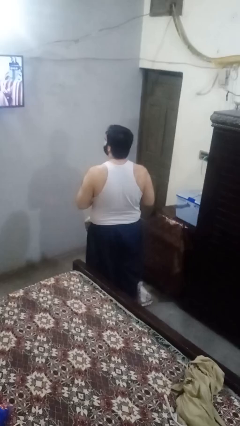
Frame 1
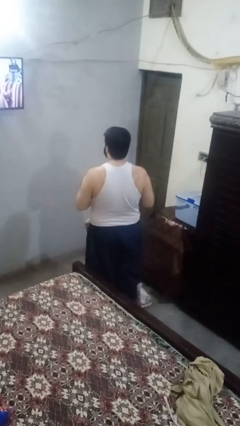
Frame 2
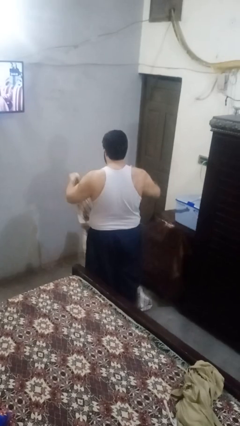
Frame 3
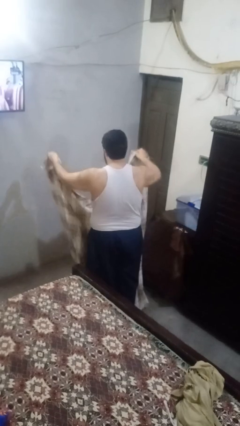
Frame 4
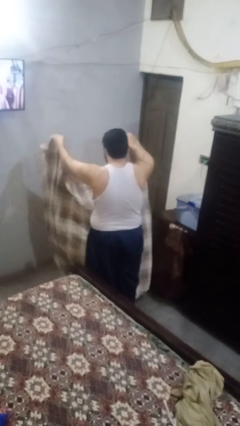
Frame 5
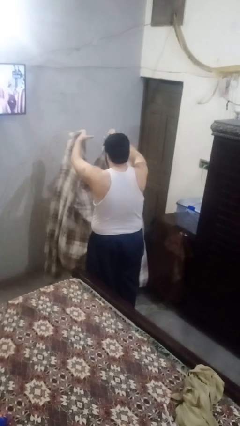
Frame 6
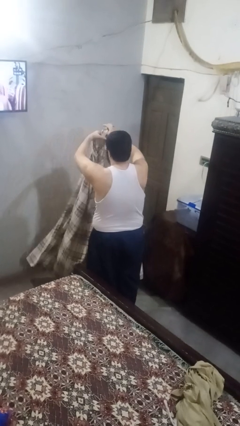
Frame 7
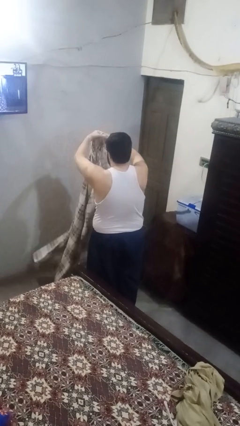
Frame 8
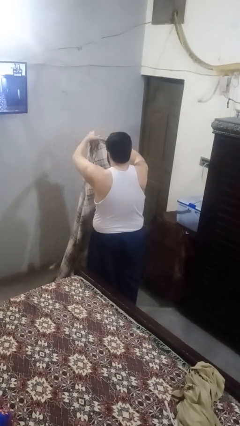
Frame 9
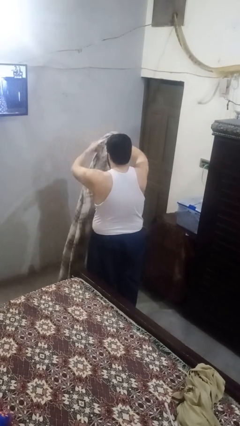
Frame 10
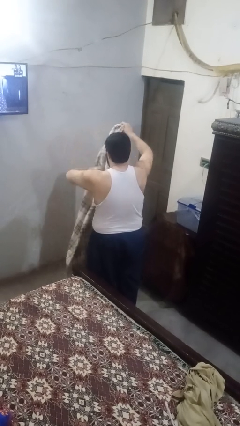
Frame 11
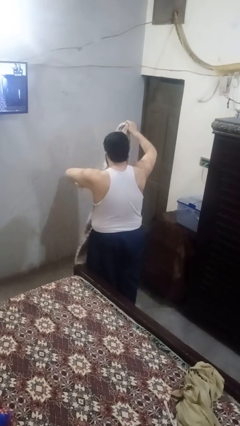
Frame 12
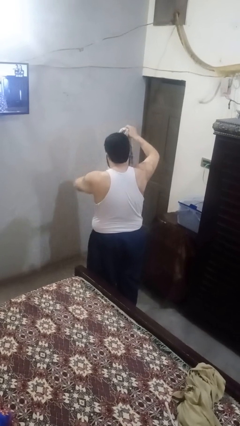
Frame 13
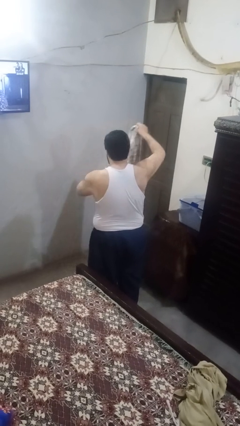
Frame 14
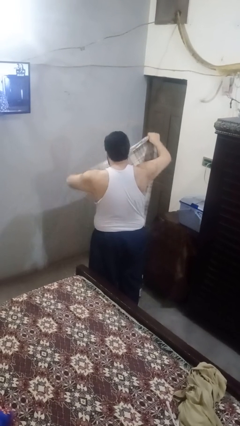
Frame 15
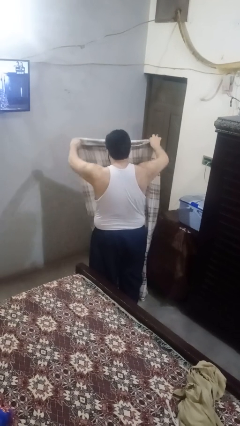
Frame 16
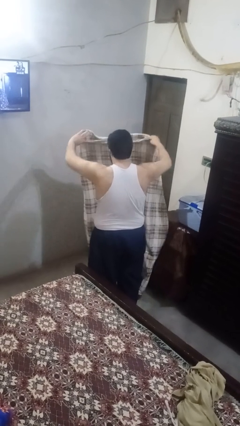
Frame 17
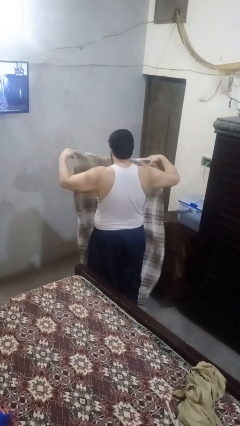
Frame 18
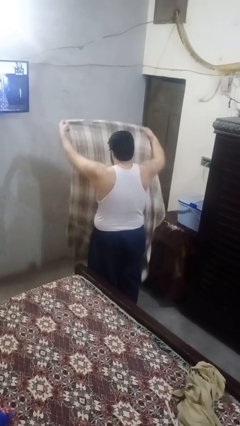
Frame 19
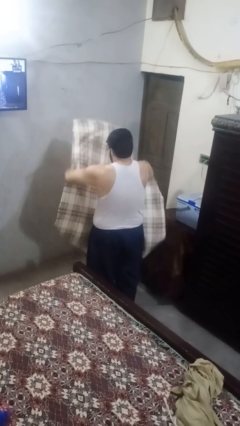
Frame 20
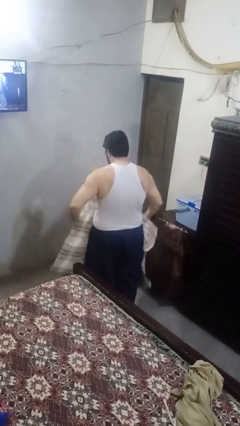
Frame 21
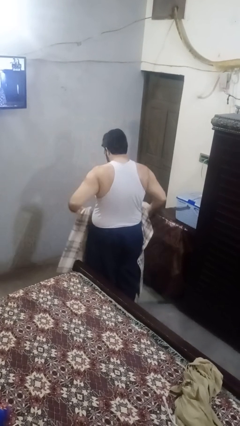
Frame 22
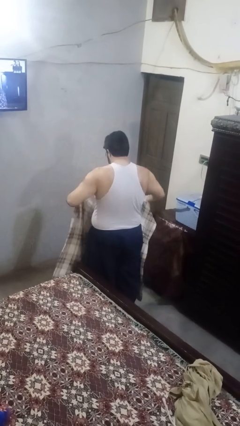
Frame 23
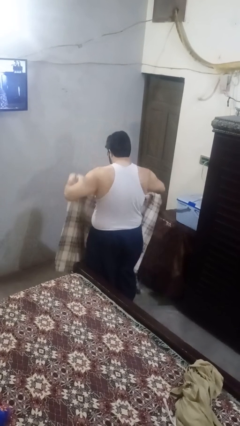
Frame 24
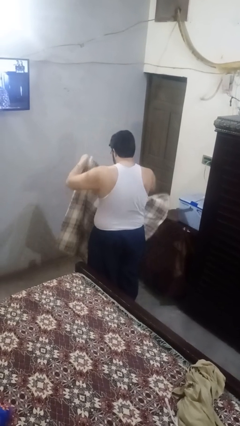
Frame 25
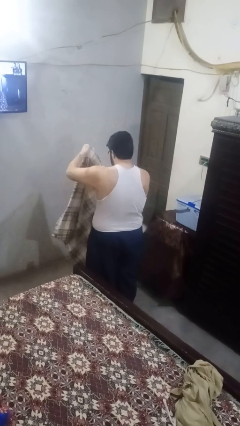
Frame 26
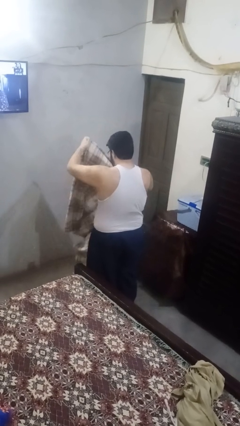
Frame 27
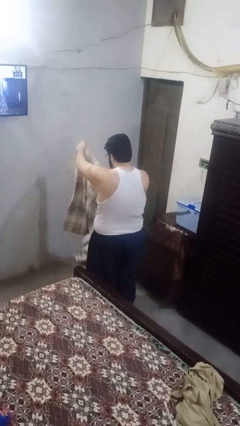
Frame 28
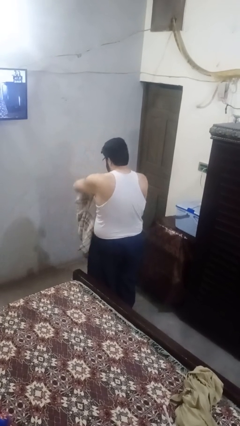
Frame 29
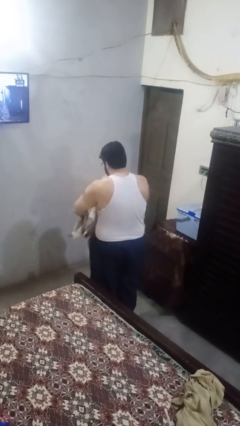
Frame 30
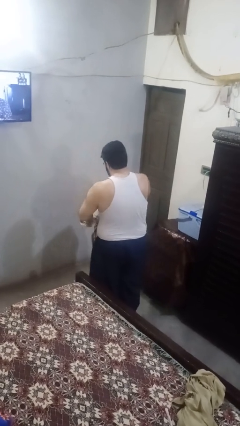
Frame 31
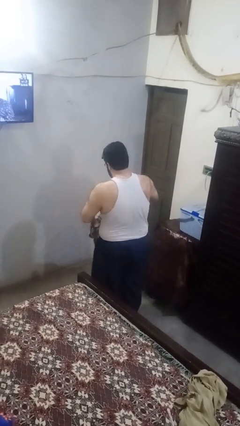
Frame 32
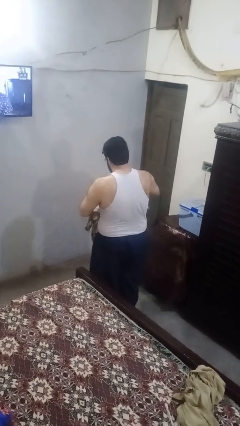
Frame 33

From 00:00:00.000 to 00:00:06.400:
person folds blanket

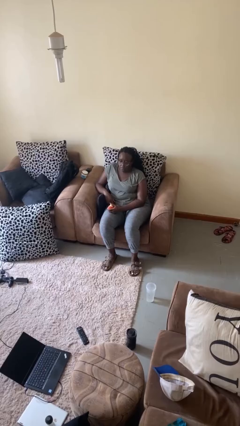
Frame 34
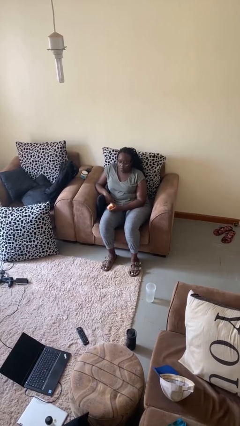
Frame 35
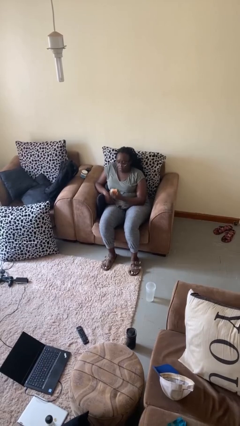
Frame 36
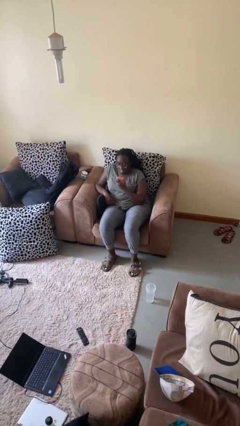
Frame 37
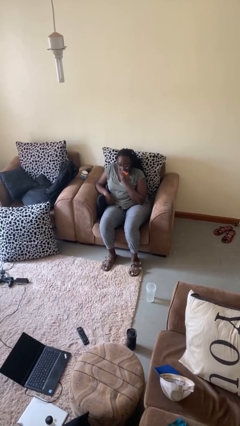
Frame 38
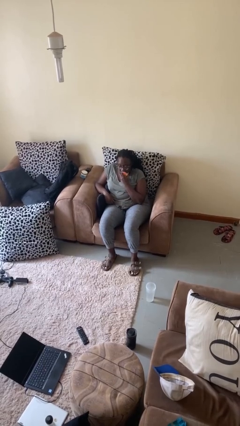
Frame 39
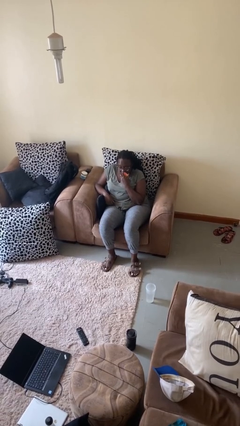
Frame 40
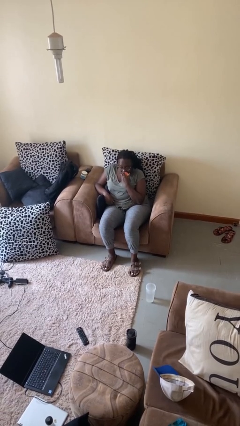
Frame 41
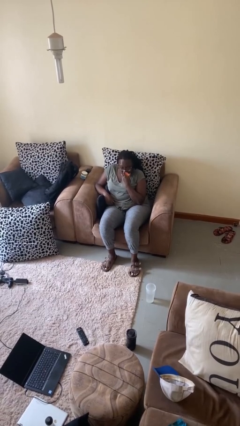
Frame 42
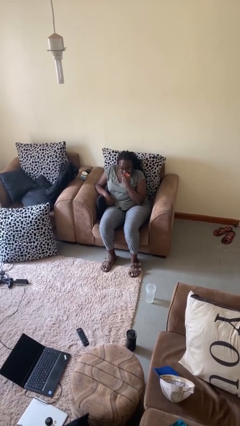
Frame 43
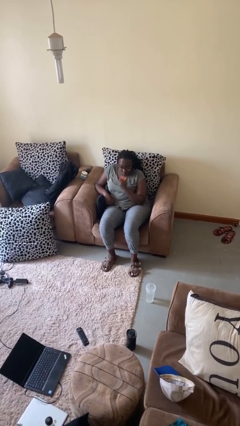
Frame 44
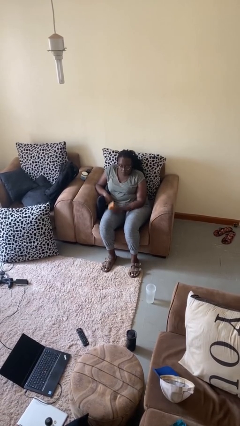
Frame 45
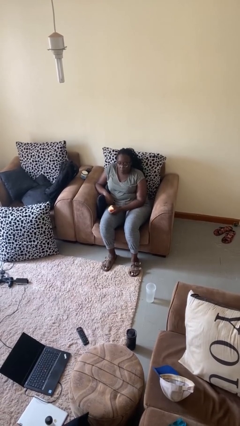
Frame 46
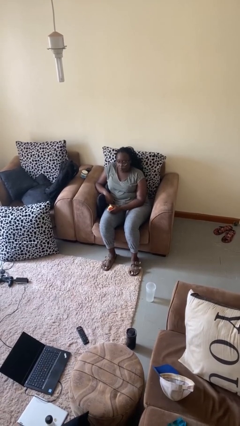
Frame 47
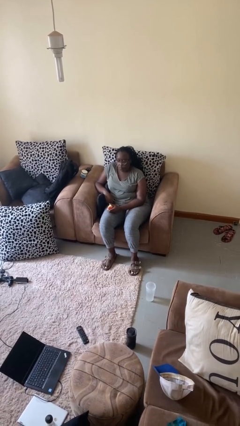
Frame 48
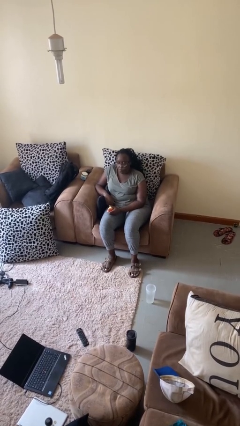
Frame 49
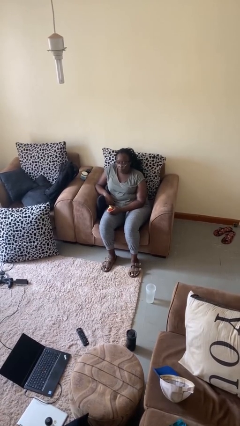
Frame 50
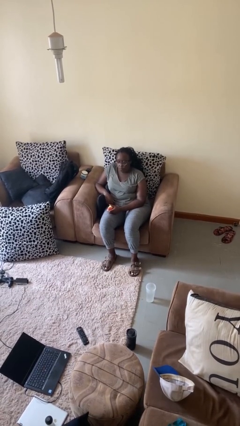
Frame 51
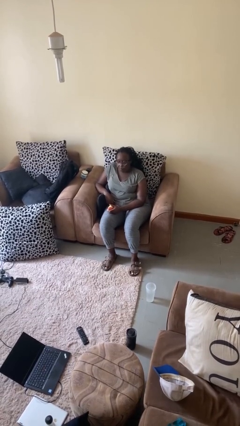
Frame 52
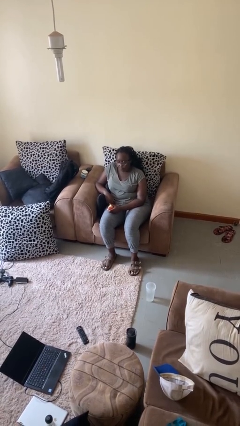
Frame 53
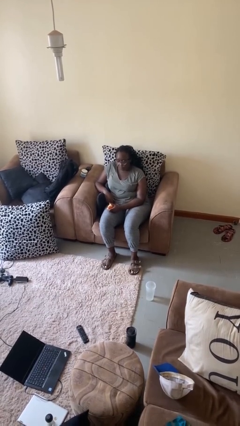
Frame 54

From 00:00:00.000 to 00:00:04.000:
person eats apple

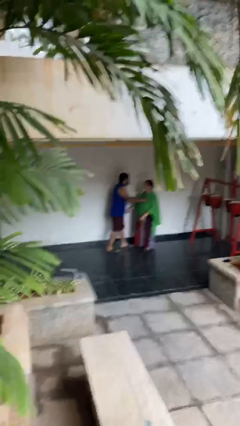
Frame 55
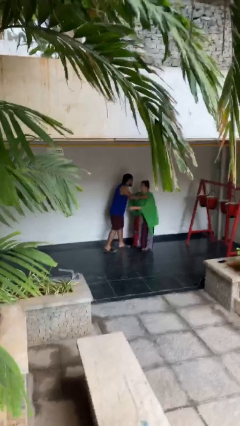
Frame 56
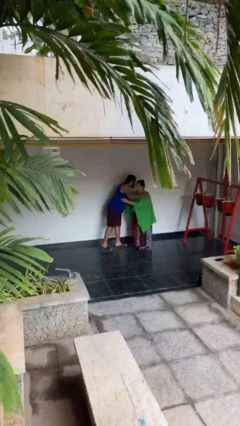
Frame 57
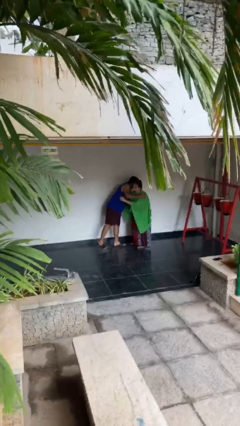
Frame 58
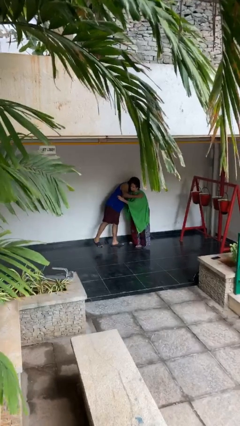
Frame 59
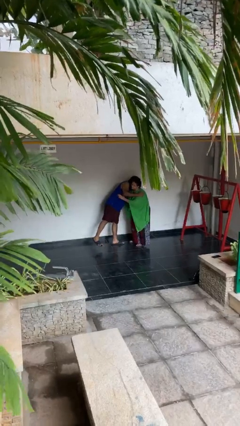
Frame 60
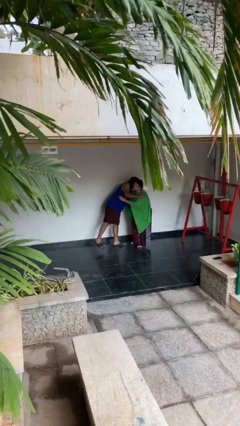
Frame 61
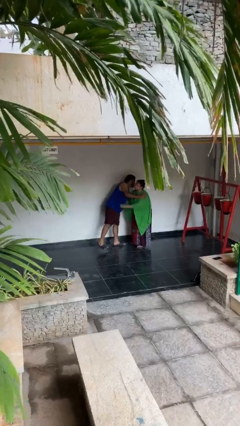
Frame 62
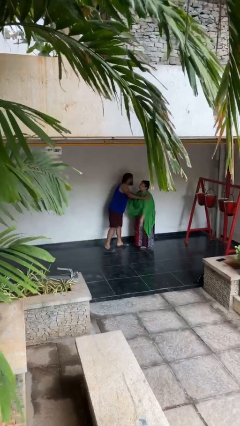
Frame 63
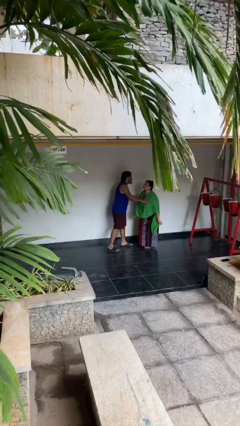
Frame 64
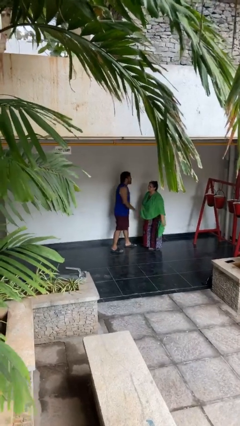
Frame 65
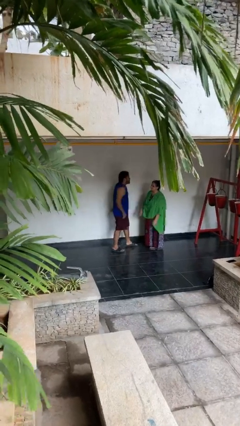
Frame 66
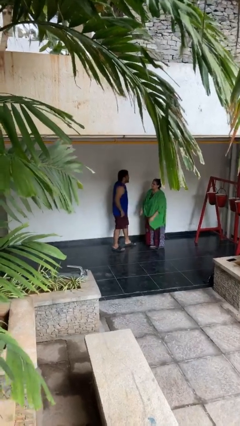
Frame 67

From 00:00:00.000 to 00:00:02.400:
person embraces person

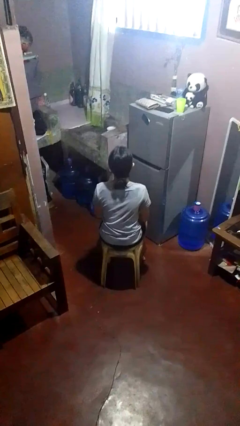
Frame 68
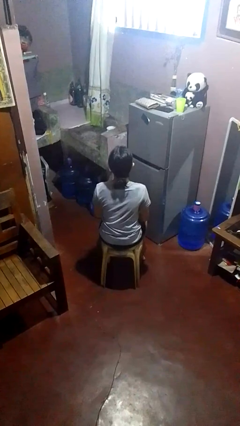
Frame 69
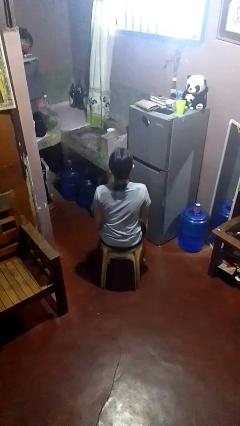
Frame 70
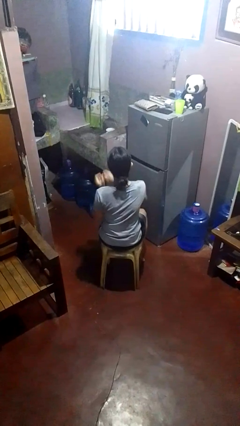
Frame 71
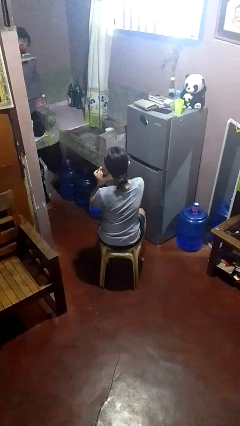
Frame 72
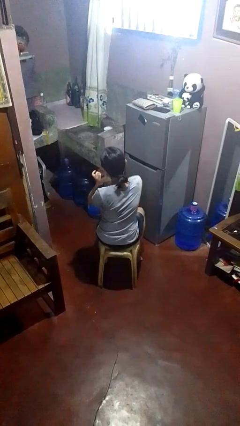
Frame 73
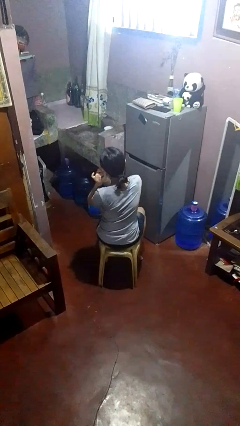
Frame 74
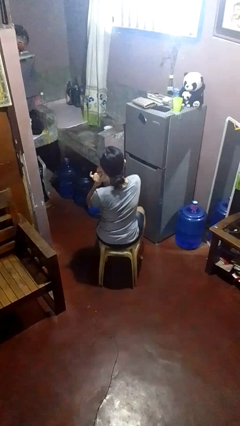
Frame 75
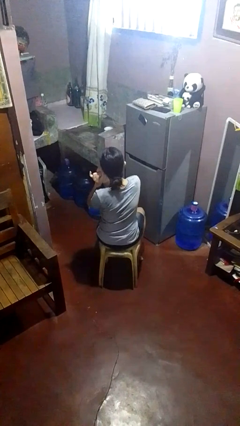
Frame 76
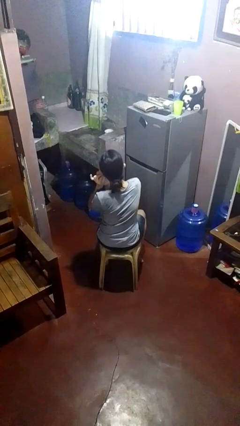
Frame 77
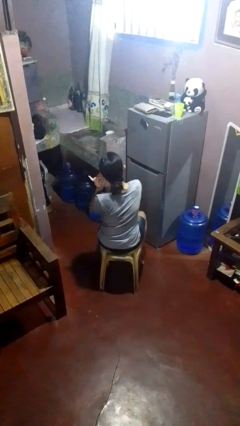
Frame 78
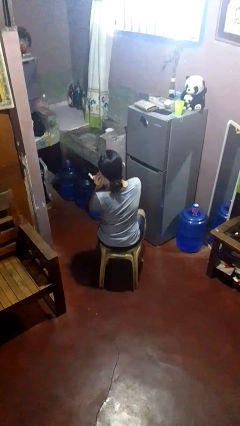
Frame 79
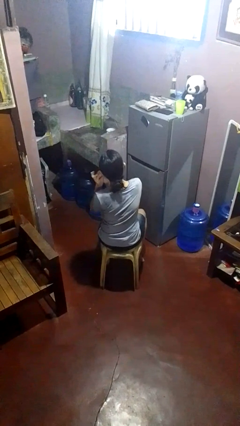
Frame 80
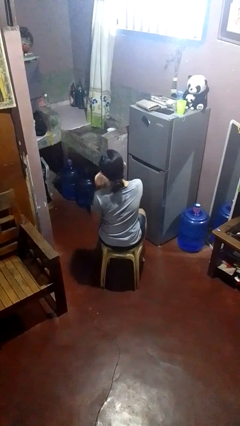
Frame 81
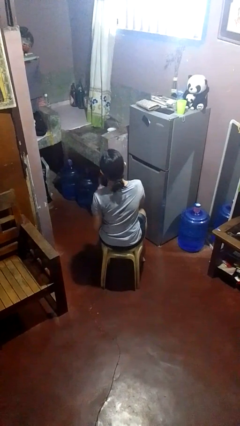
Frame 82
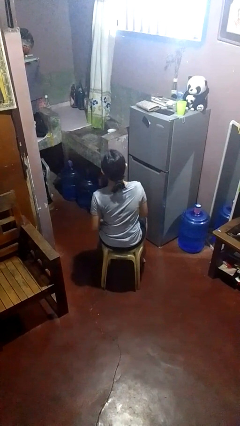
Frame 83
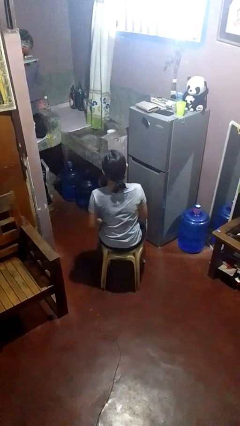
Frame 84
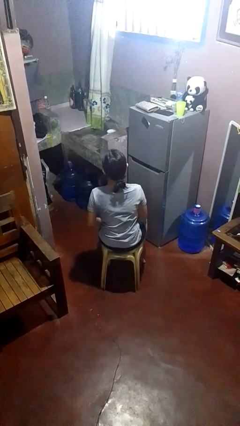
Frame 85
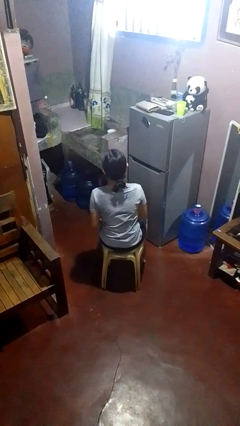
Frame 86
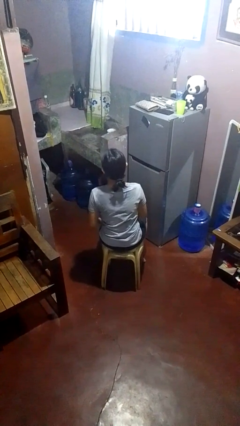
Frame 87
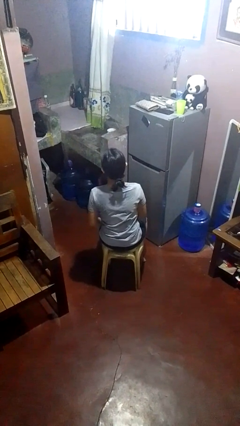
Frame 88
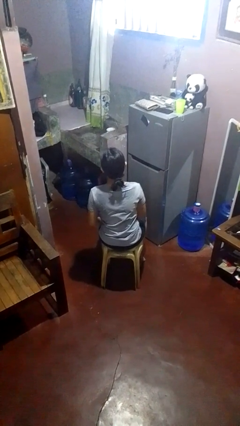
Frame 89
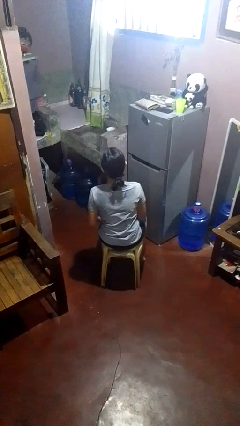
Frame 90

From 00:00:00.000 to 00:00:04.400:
person puts on earrings

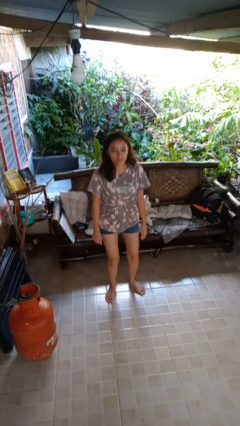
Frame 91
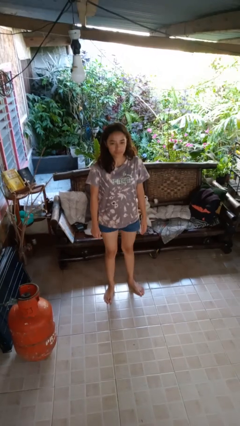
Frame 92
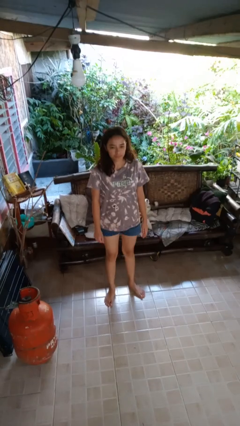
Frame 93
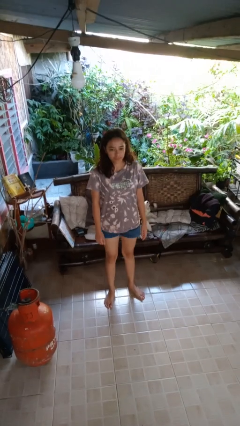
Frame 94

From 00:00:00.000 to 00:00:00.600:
person stands up
